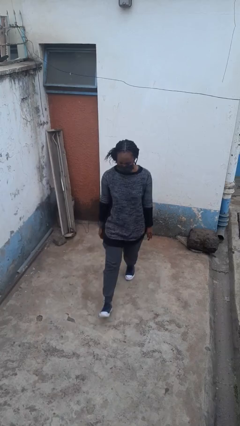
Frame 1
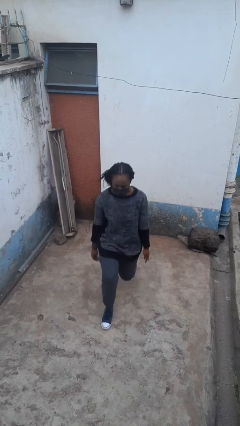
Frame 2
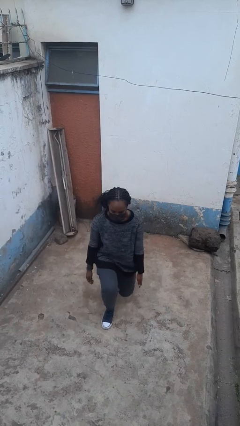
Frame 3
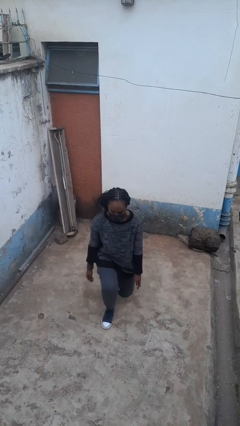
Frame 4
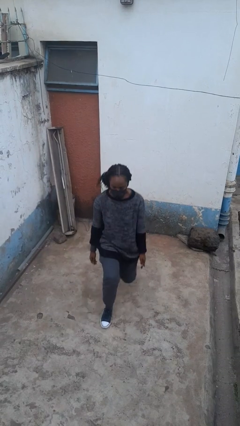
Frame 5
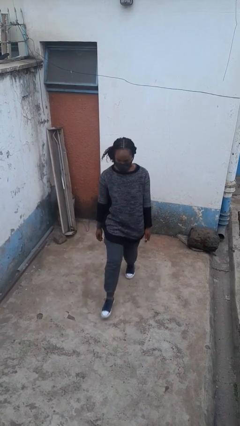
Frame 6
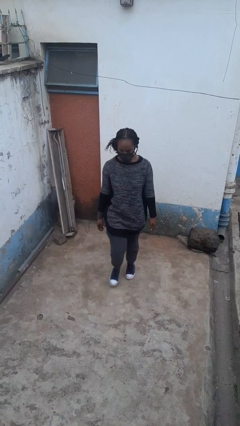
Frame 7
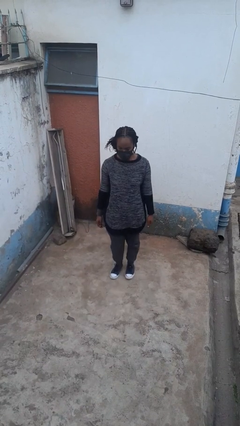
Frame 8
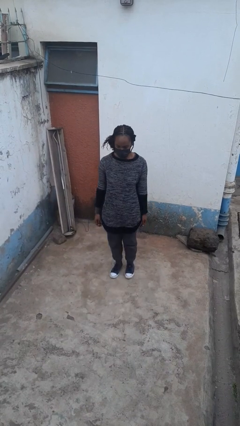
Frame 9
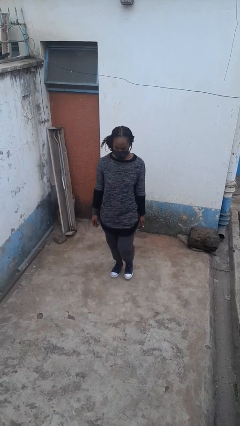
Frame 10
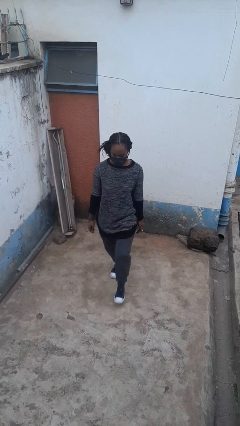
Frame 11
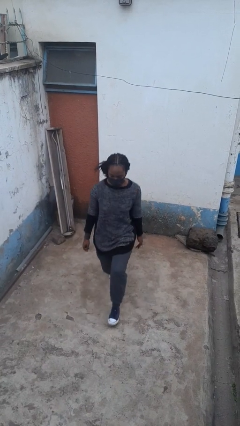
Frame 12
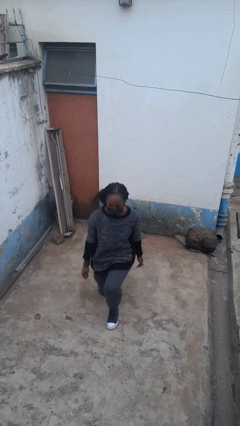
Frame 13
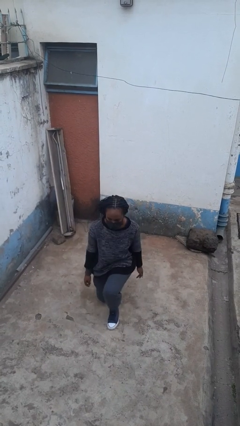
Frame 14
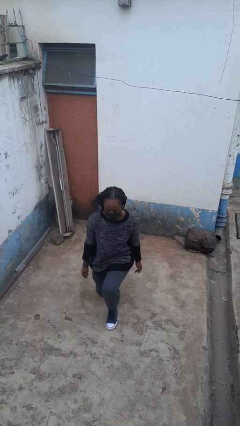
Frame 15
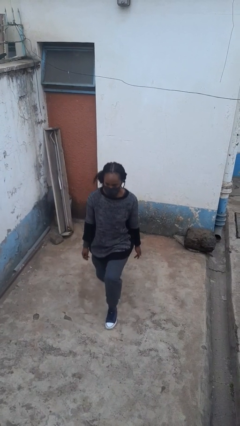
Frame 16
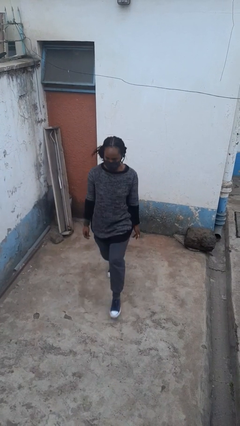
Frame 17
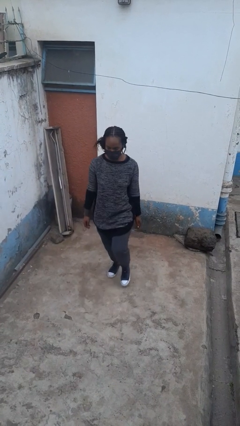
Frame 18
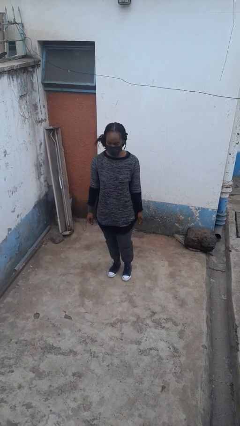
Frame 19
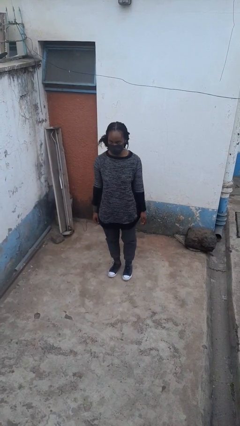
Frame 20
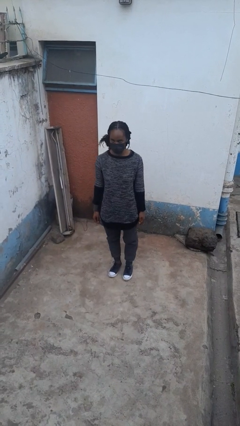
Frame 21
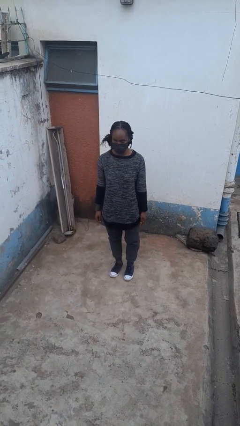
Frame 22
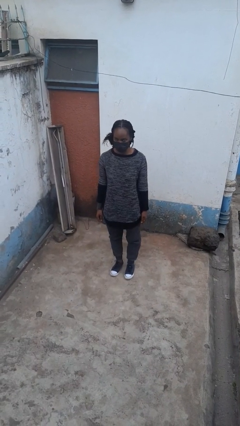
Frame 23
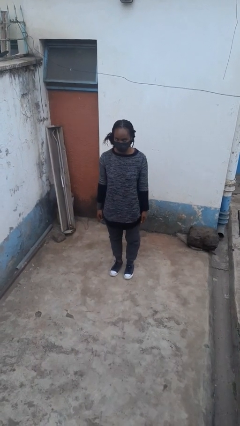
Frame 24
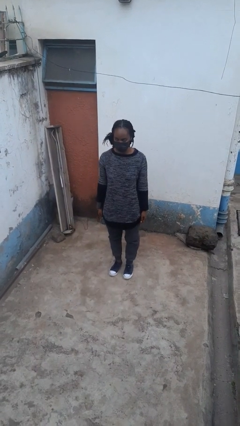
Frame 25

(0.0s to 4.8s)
person exercises with lunges

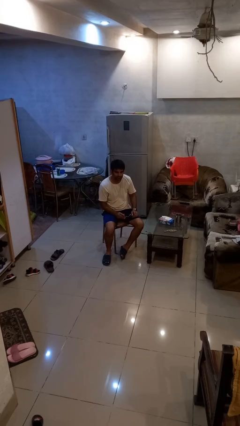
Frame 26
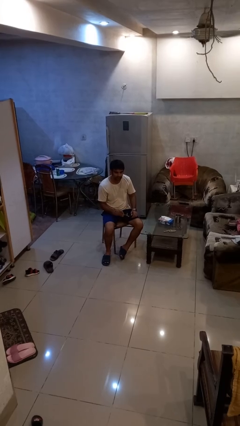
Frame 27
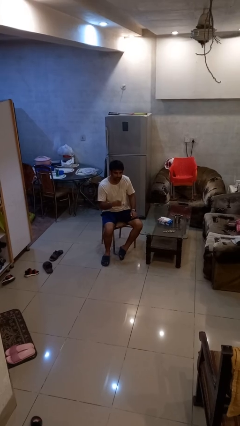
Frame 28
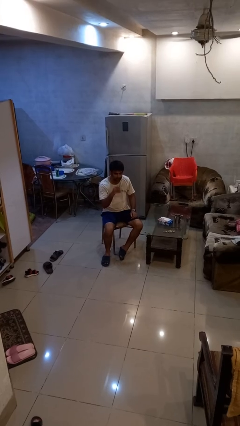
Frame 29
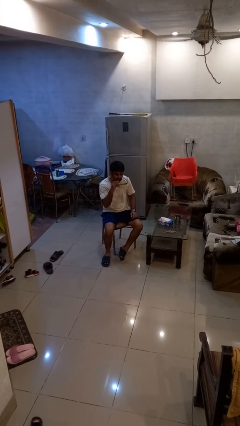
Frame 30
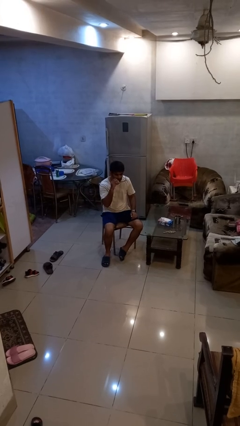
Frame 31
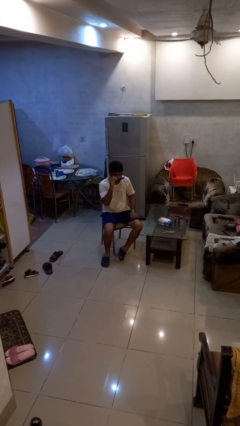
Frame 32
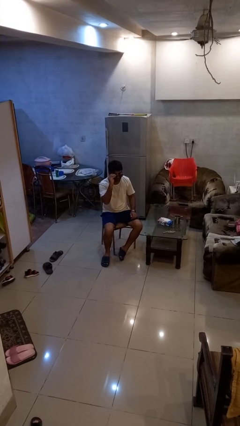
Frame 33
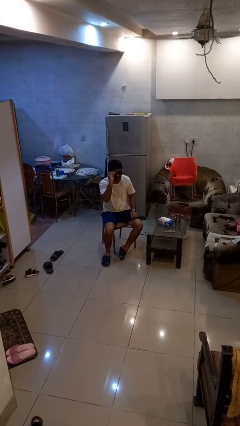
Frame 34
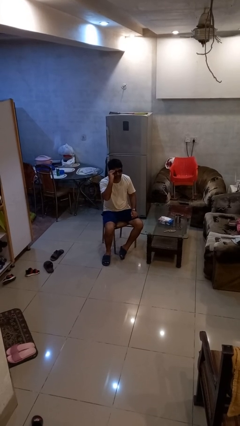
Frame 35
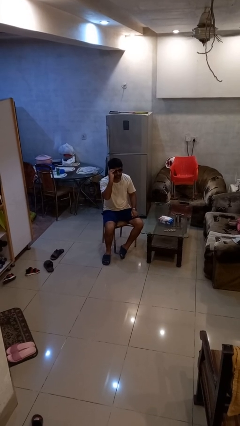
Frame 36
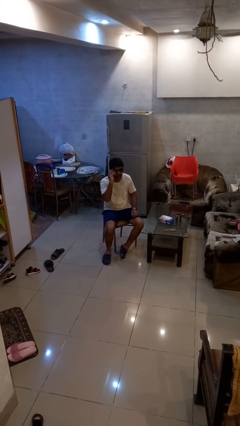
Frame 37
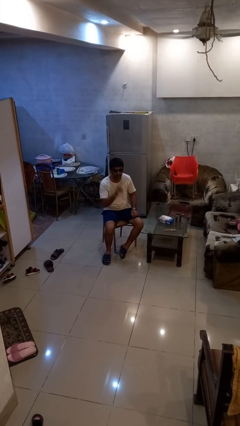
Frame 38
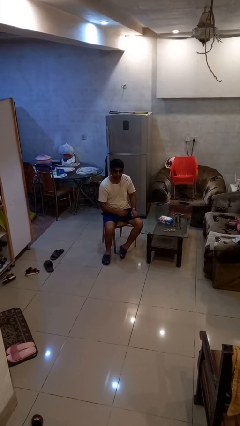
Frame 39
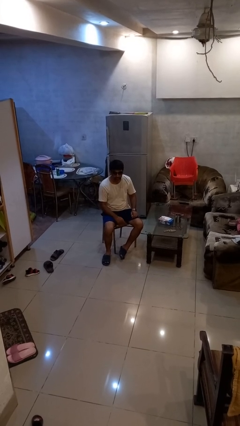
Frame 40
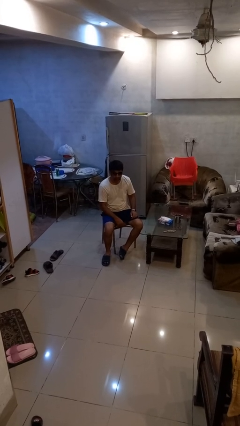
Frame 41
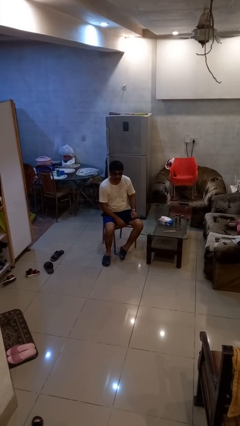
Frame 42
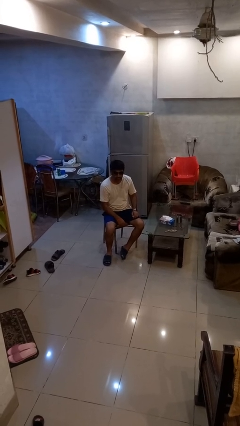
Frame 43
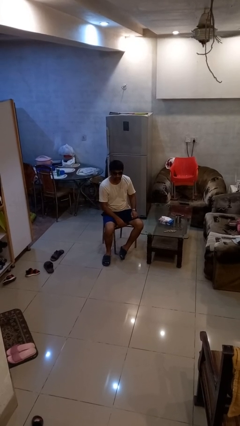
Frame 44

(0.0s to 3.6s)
person puts on sunglasses

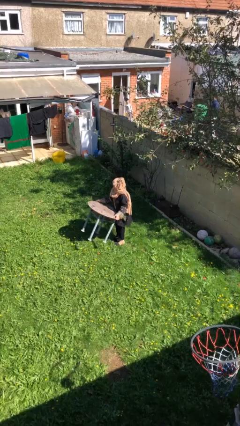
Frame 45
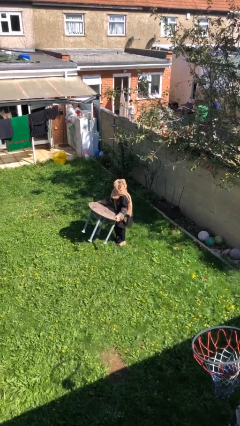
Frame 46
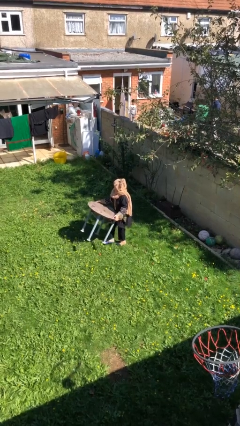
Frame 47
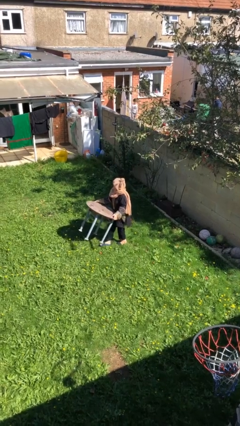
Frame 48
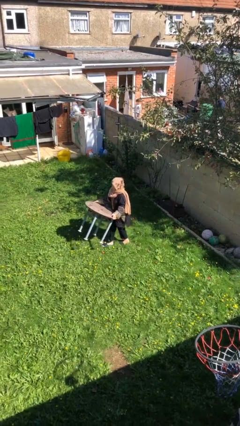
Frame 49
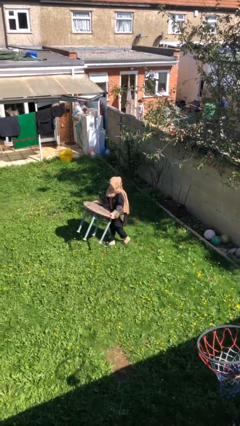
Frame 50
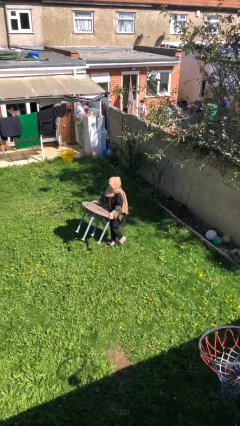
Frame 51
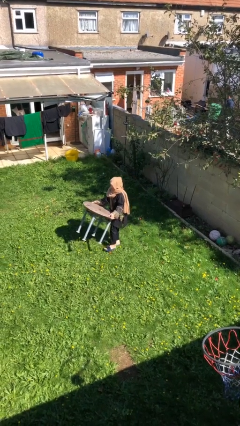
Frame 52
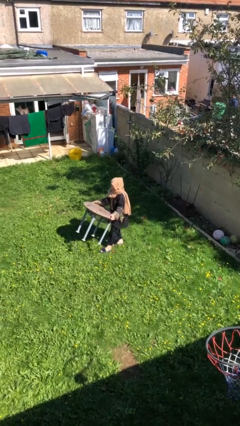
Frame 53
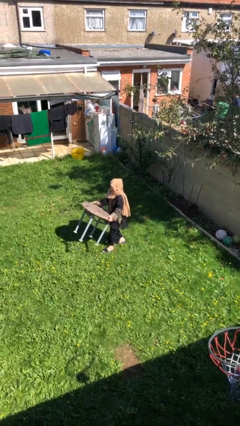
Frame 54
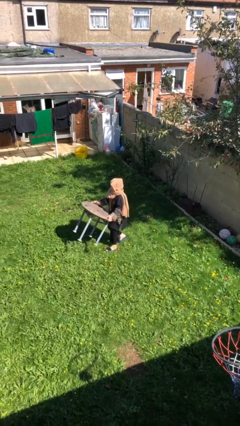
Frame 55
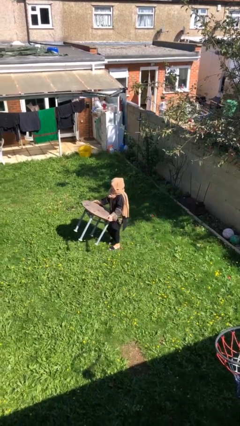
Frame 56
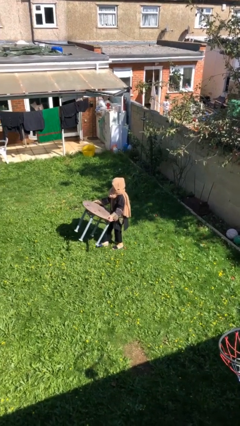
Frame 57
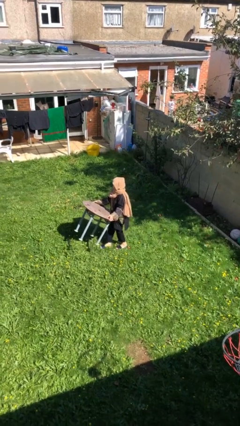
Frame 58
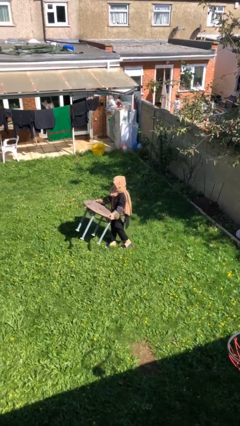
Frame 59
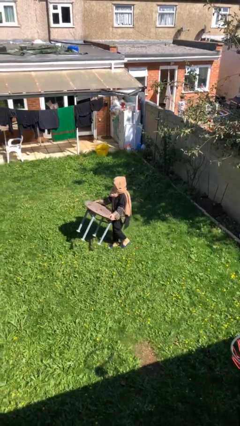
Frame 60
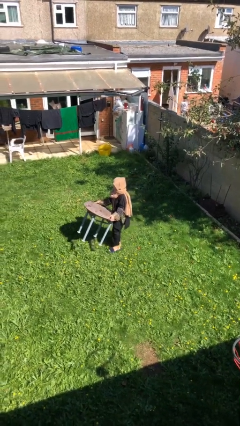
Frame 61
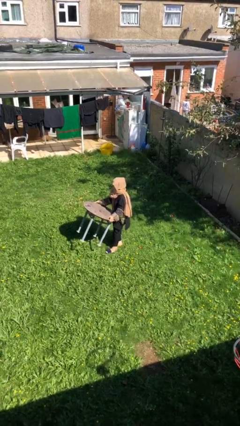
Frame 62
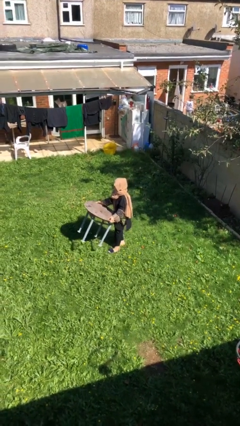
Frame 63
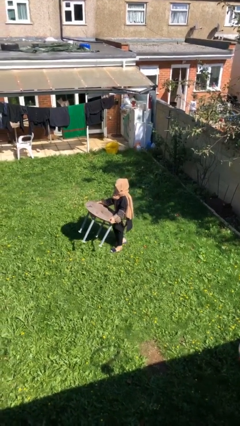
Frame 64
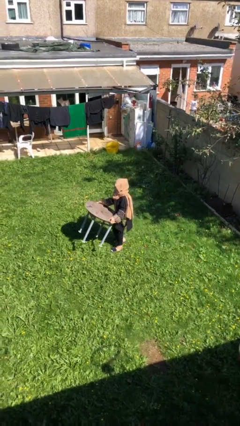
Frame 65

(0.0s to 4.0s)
person carries heavy object

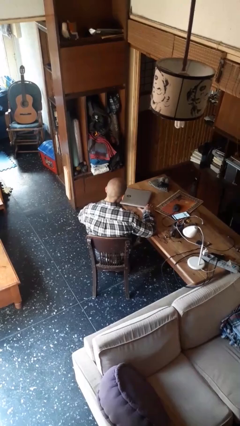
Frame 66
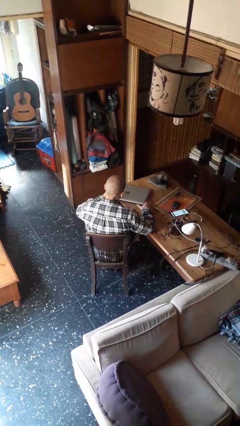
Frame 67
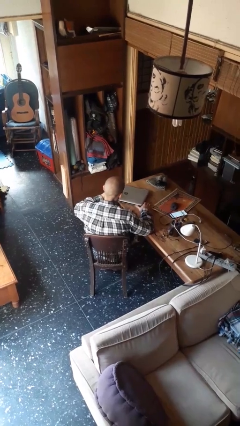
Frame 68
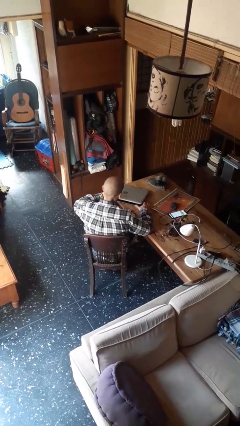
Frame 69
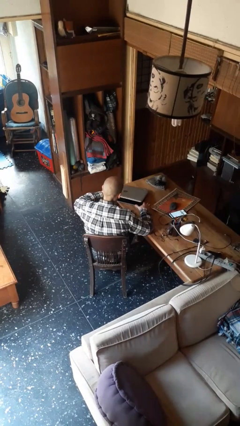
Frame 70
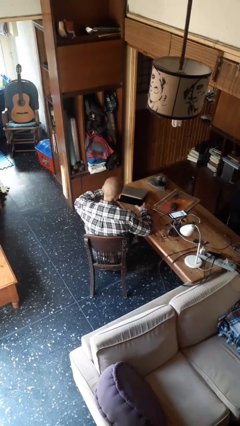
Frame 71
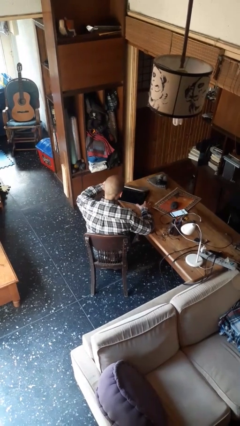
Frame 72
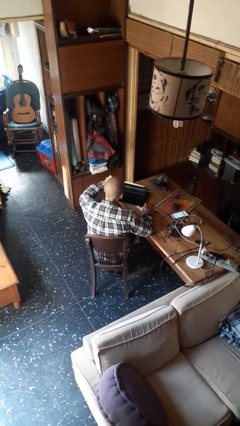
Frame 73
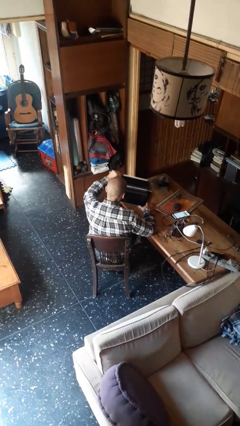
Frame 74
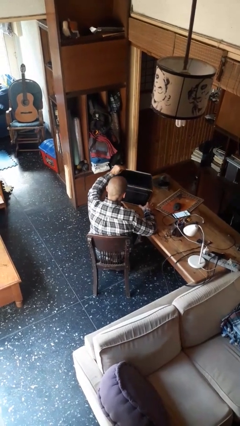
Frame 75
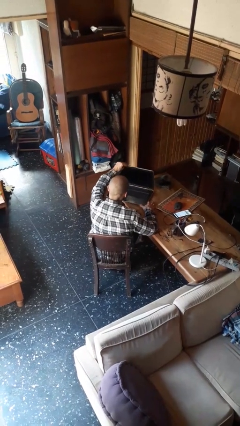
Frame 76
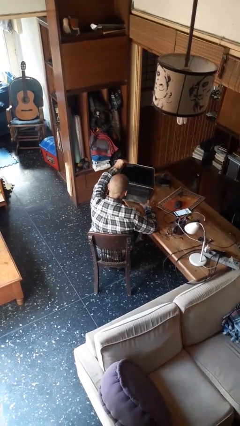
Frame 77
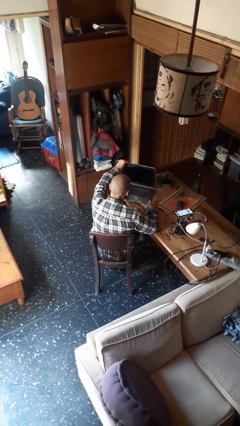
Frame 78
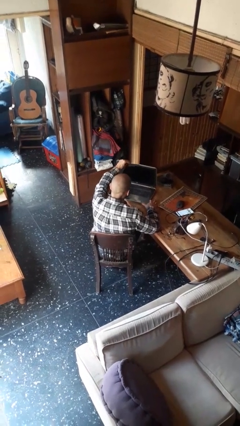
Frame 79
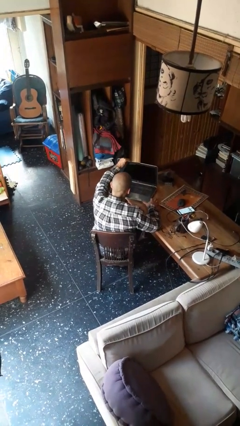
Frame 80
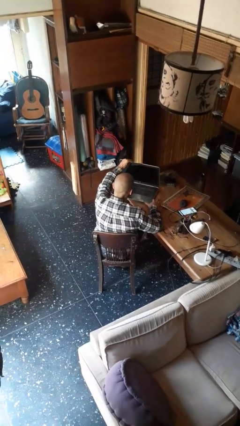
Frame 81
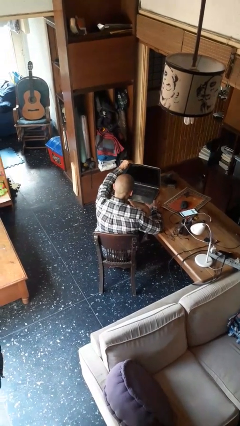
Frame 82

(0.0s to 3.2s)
person opens laptop

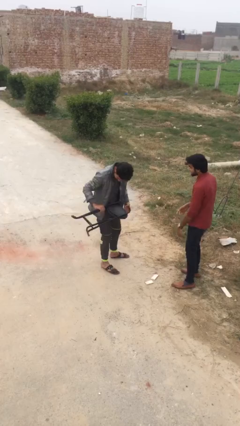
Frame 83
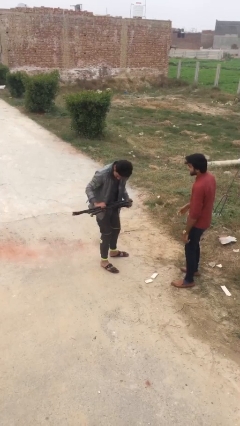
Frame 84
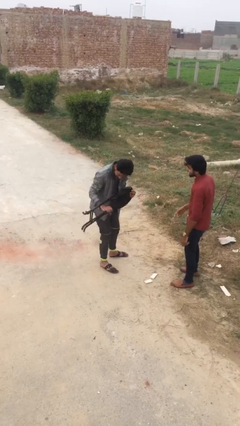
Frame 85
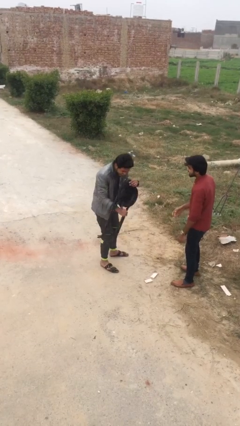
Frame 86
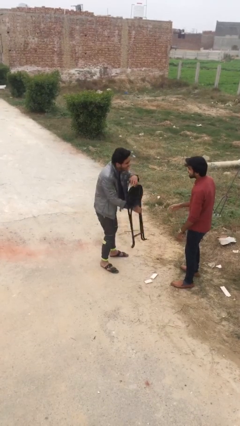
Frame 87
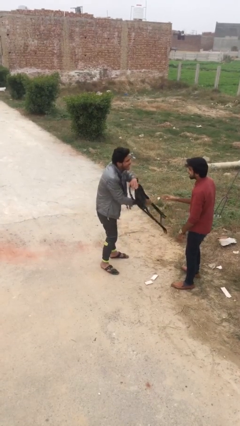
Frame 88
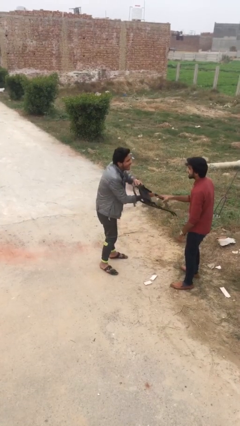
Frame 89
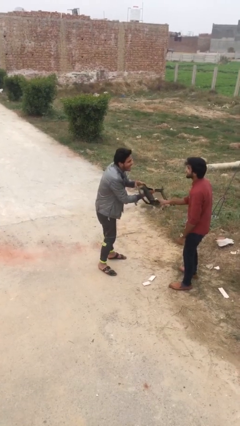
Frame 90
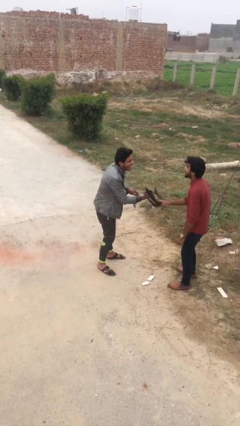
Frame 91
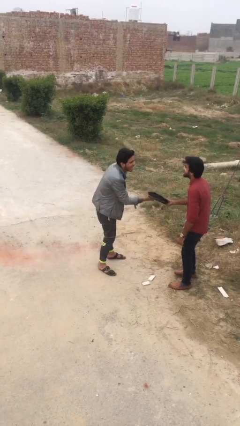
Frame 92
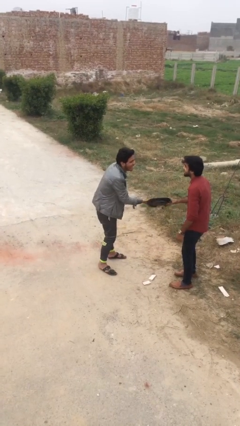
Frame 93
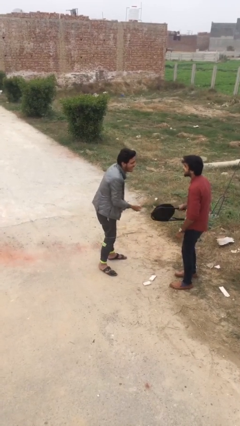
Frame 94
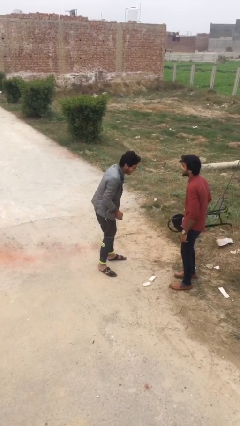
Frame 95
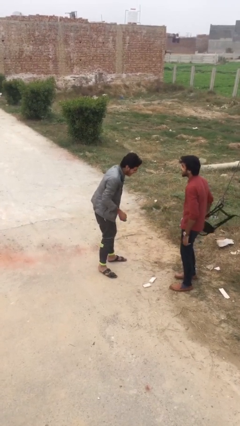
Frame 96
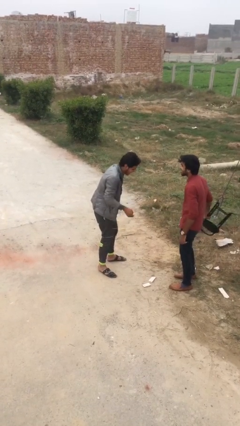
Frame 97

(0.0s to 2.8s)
person transfers object to person
